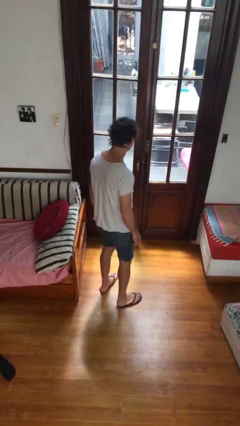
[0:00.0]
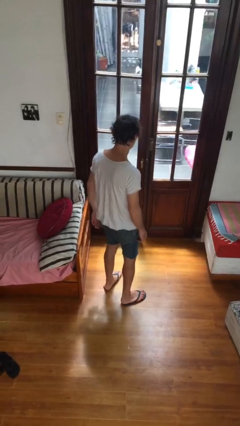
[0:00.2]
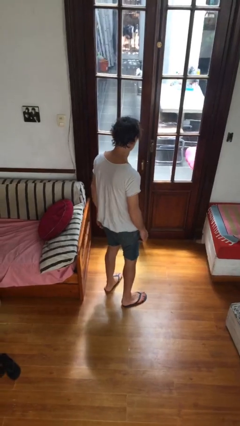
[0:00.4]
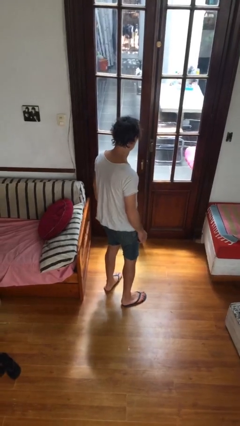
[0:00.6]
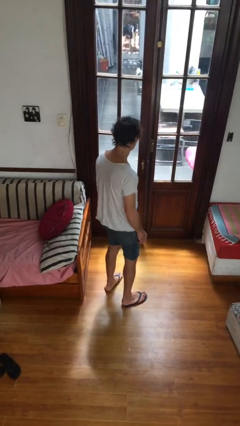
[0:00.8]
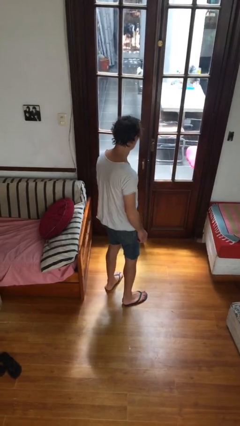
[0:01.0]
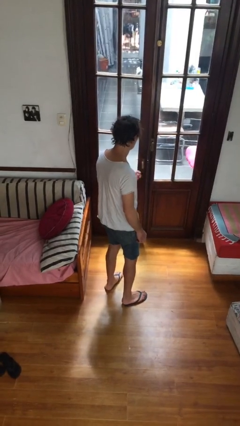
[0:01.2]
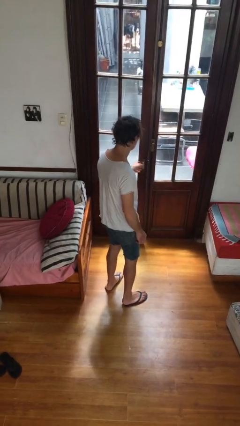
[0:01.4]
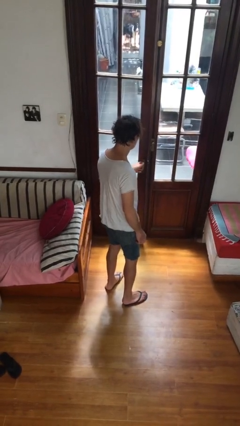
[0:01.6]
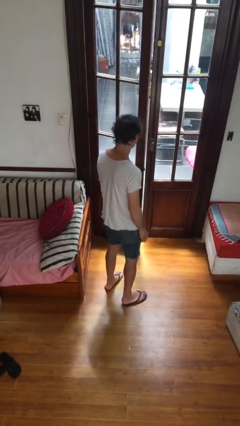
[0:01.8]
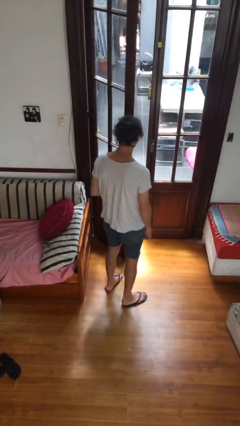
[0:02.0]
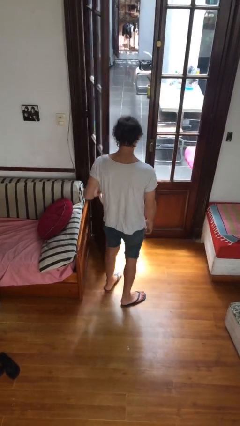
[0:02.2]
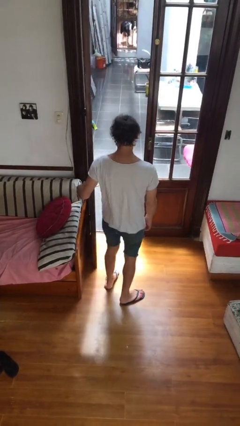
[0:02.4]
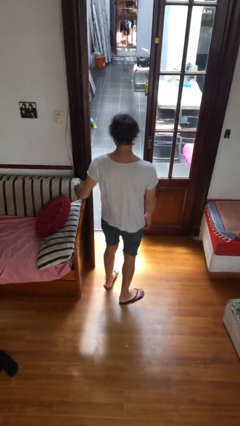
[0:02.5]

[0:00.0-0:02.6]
person opens facility door

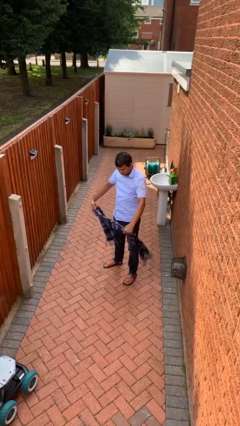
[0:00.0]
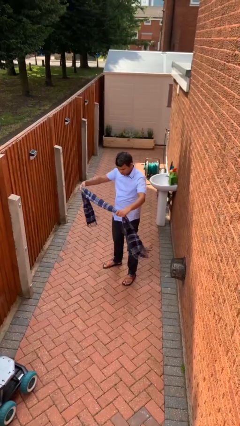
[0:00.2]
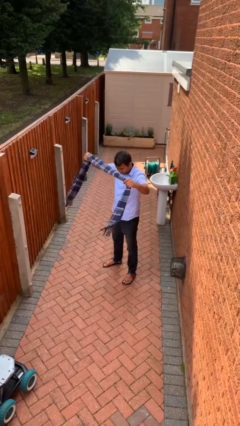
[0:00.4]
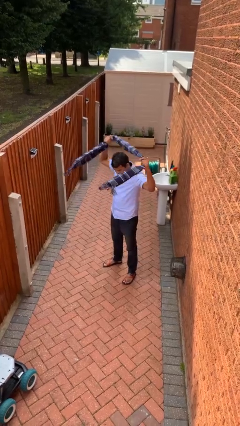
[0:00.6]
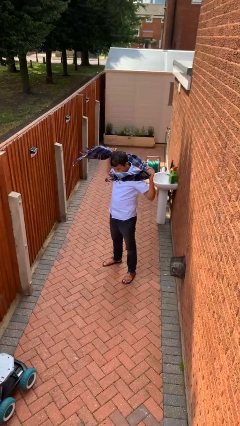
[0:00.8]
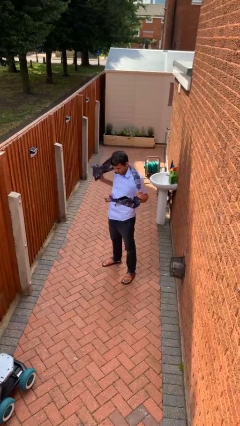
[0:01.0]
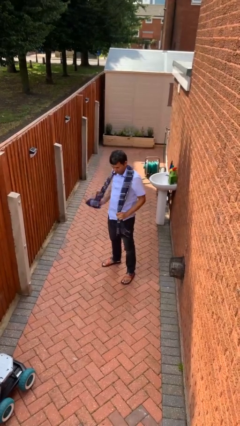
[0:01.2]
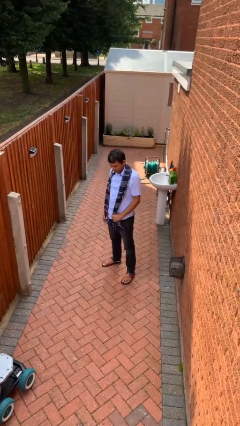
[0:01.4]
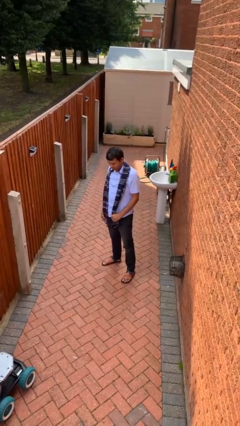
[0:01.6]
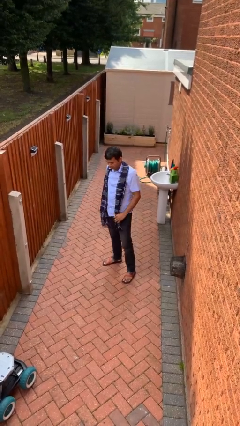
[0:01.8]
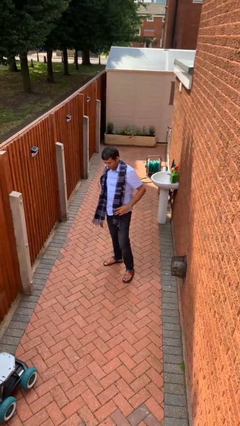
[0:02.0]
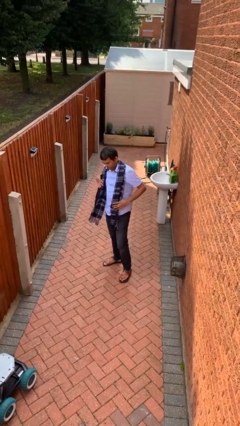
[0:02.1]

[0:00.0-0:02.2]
person puts on scarf

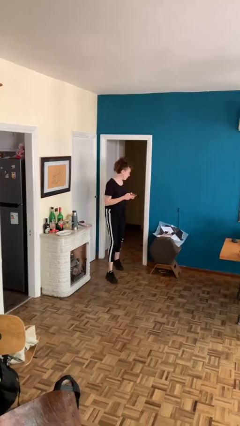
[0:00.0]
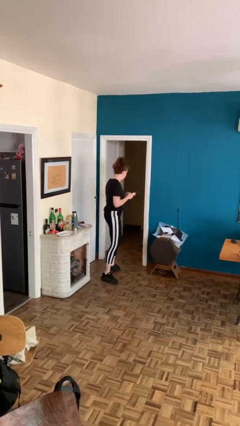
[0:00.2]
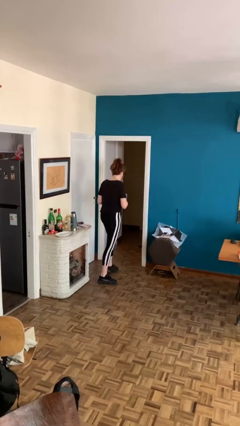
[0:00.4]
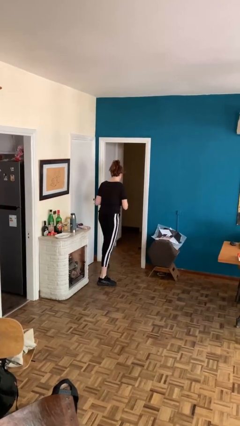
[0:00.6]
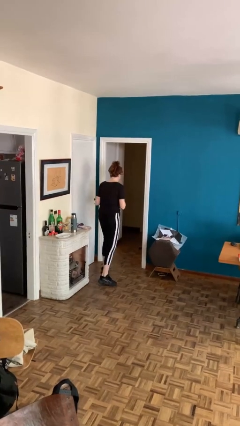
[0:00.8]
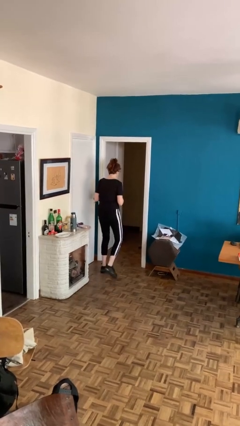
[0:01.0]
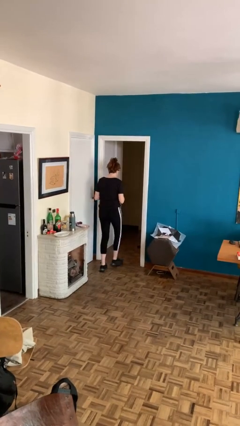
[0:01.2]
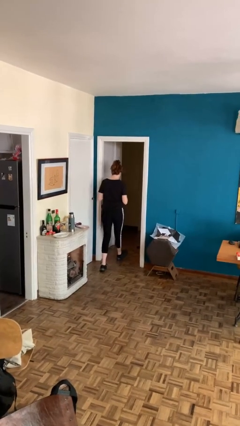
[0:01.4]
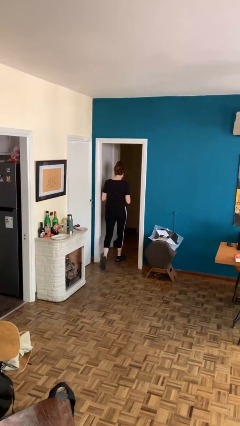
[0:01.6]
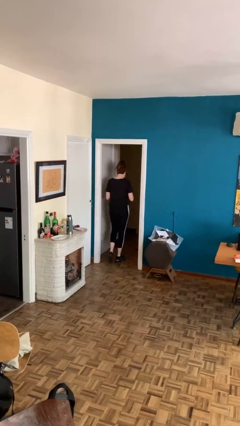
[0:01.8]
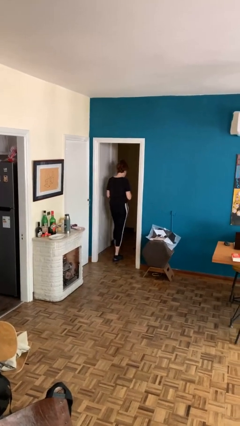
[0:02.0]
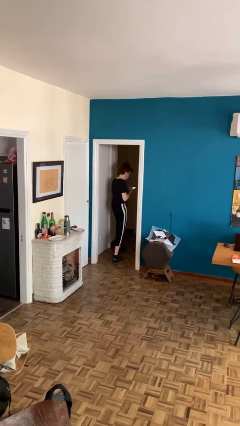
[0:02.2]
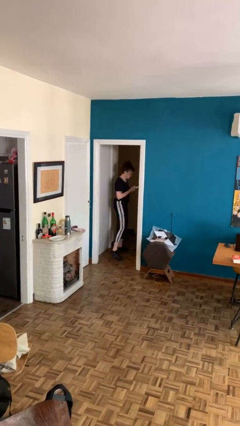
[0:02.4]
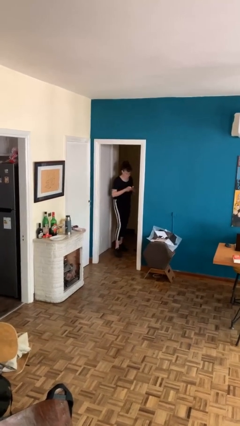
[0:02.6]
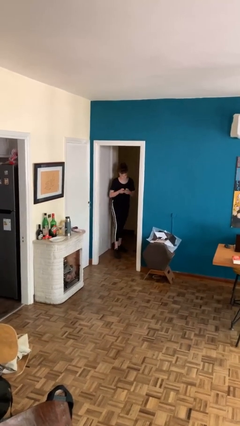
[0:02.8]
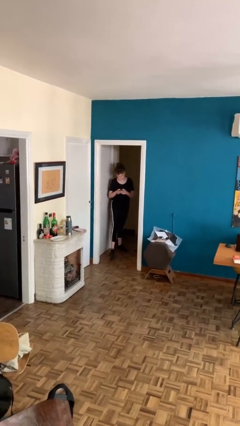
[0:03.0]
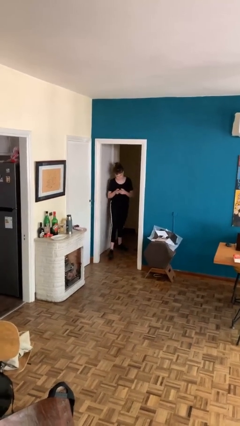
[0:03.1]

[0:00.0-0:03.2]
person exits scene through structure

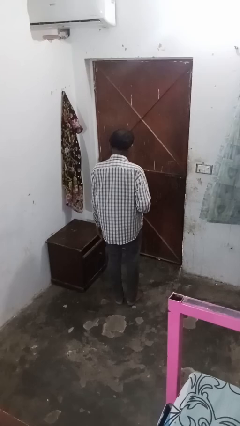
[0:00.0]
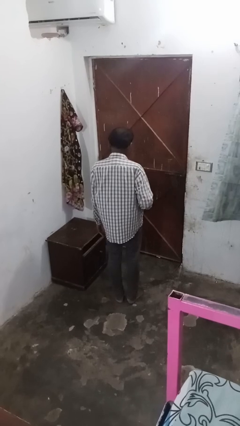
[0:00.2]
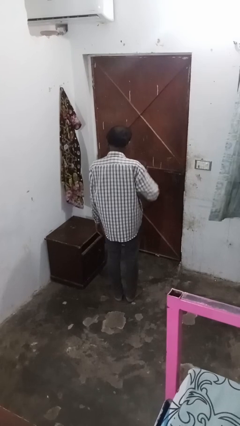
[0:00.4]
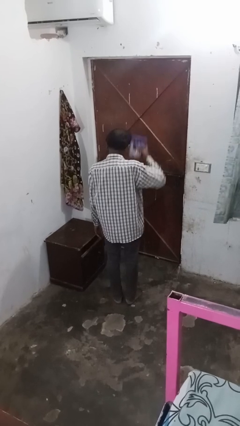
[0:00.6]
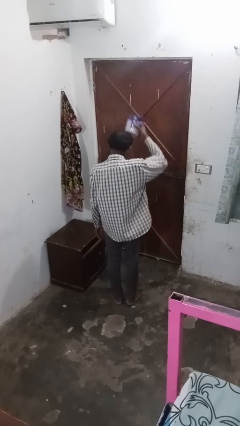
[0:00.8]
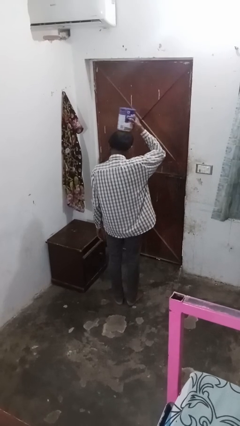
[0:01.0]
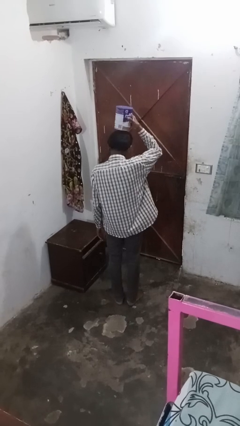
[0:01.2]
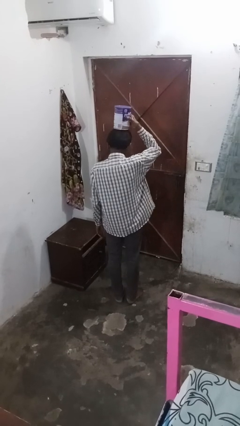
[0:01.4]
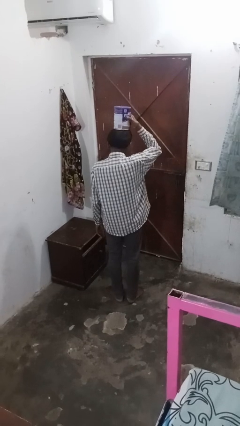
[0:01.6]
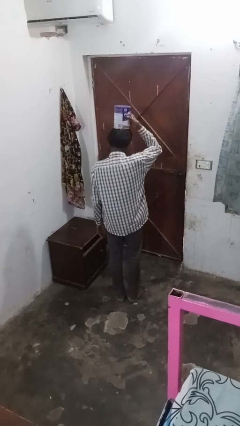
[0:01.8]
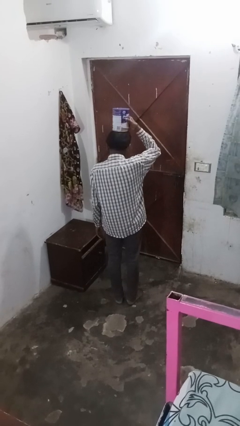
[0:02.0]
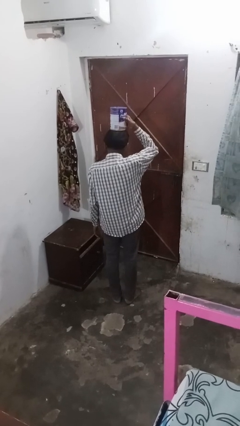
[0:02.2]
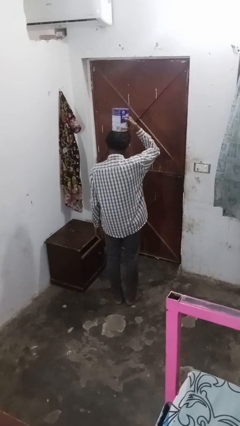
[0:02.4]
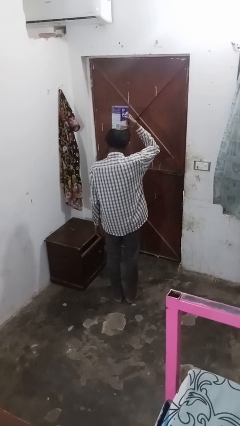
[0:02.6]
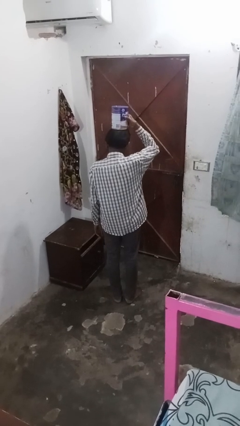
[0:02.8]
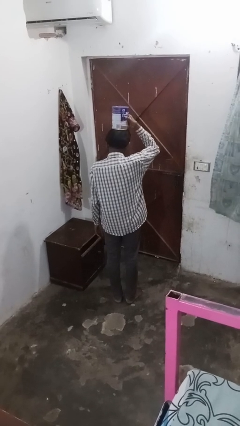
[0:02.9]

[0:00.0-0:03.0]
person holds object above head

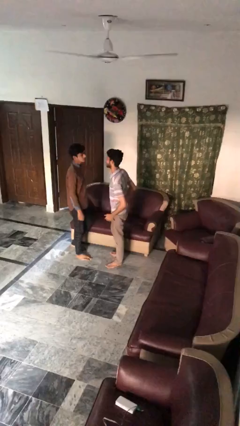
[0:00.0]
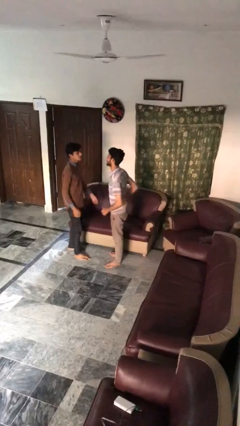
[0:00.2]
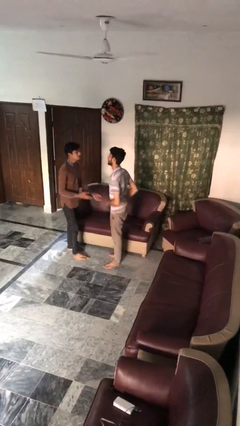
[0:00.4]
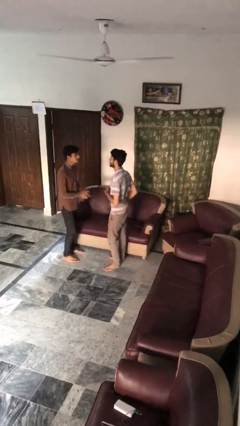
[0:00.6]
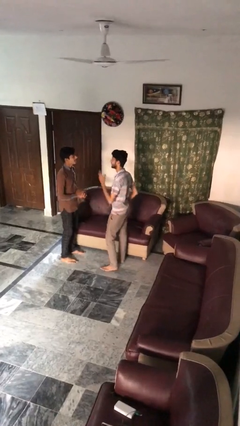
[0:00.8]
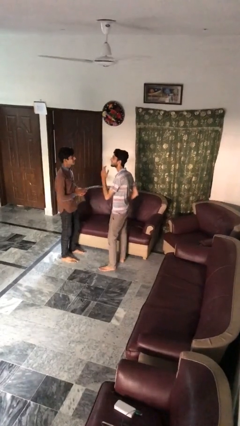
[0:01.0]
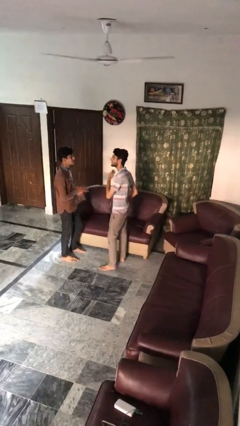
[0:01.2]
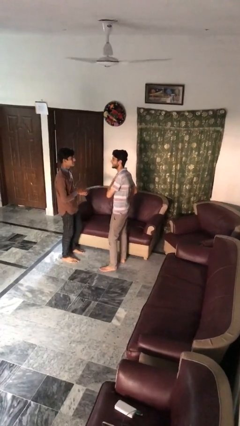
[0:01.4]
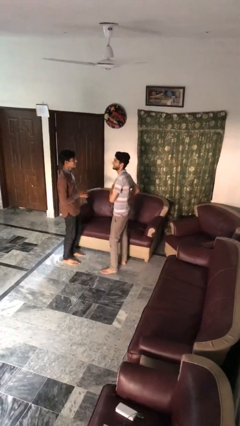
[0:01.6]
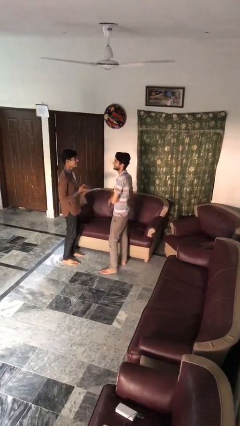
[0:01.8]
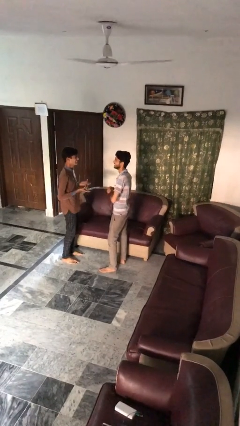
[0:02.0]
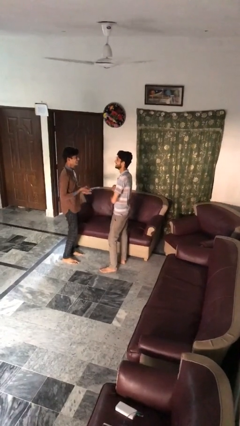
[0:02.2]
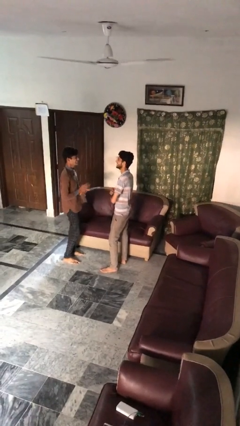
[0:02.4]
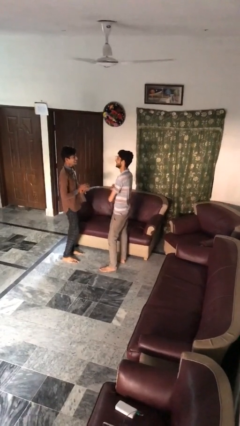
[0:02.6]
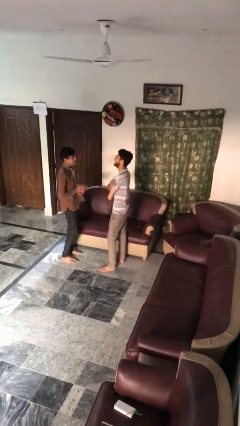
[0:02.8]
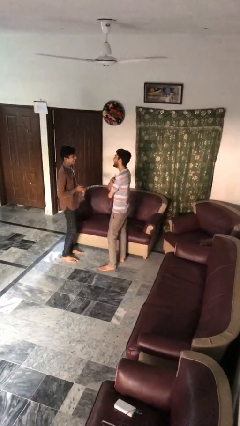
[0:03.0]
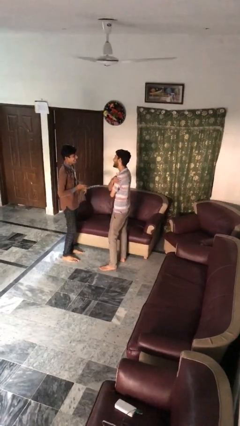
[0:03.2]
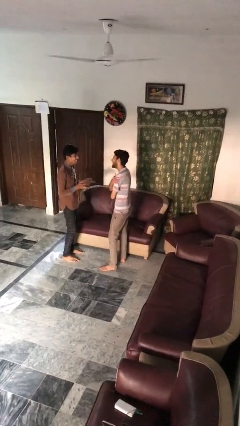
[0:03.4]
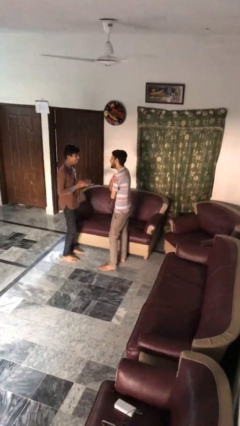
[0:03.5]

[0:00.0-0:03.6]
person talks to person

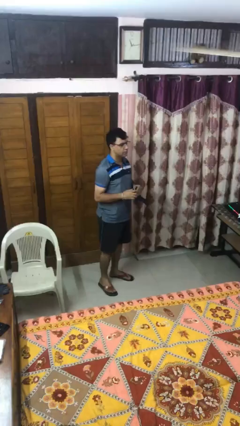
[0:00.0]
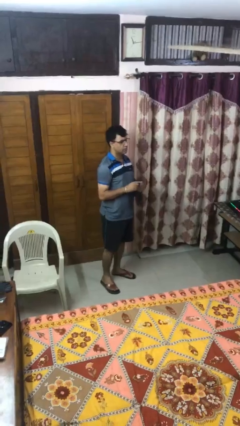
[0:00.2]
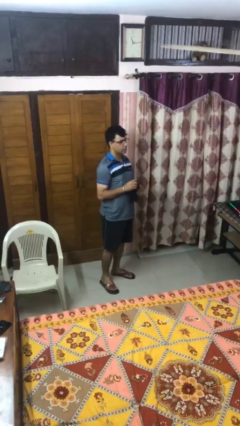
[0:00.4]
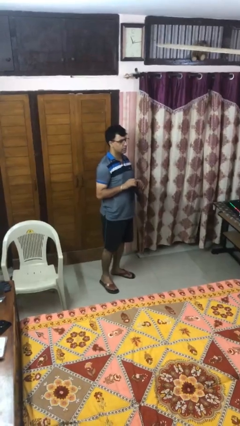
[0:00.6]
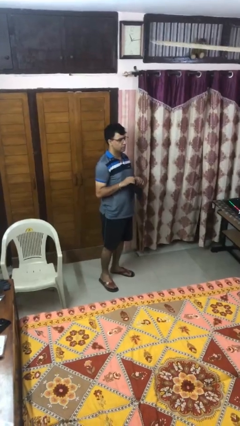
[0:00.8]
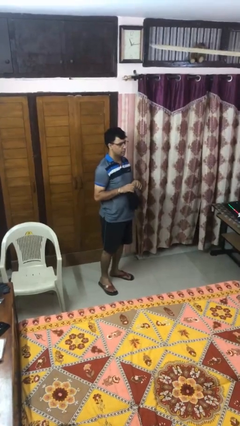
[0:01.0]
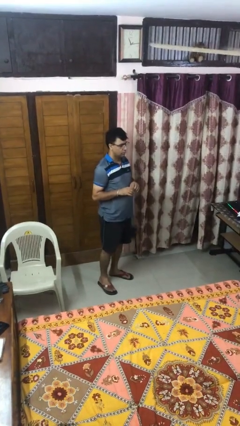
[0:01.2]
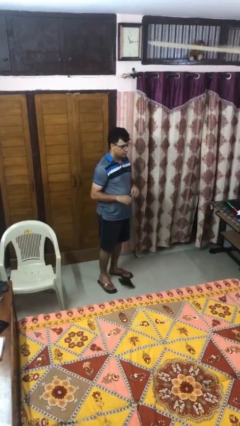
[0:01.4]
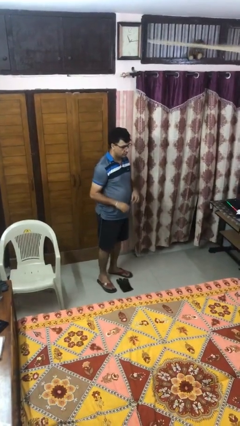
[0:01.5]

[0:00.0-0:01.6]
person drops object

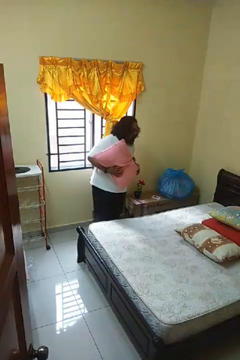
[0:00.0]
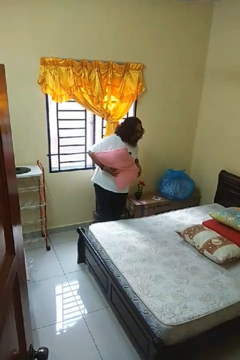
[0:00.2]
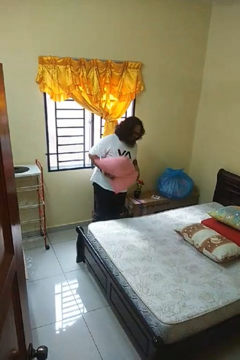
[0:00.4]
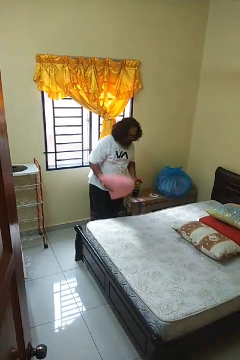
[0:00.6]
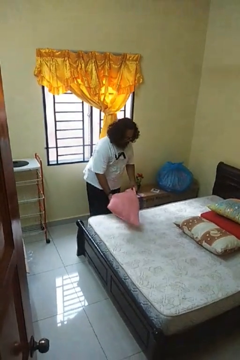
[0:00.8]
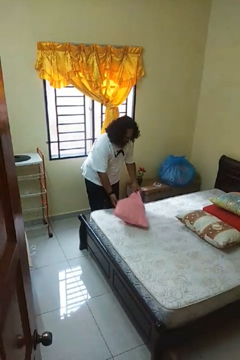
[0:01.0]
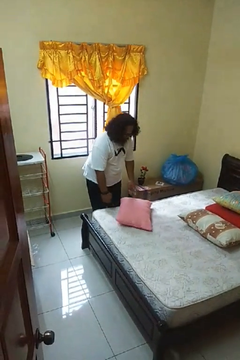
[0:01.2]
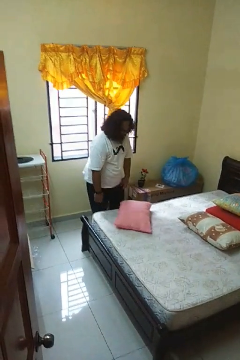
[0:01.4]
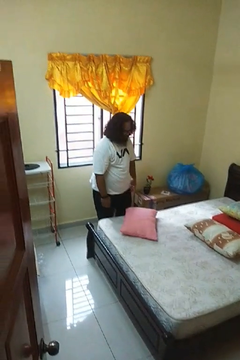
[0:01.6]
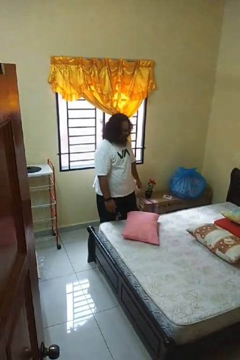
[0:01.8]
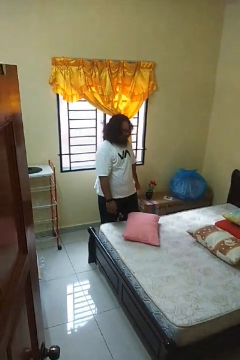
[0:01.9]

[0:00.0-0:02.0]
person puts down object on bed
